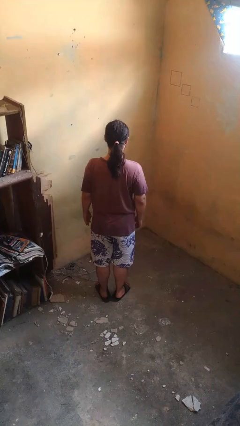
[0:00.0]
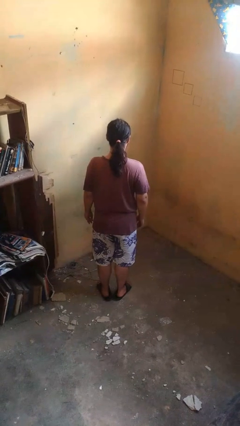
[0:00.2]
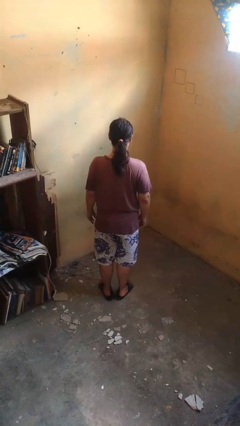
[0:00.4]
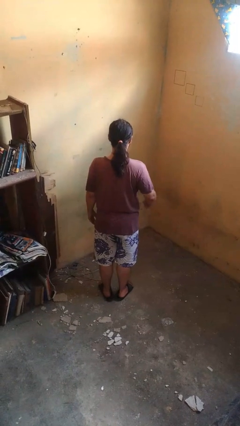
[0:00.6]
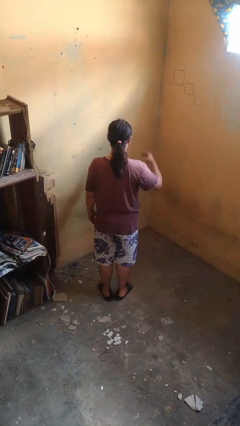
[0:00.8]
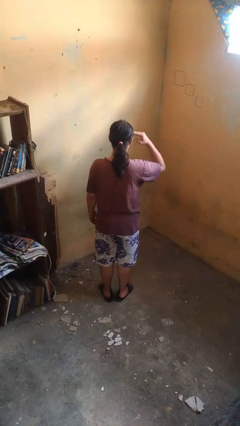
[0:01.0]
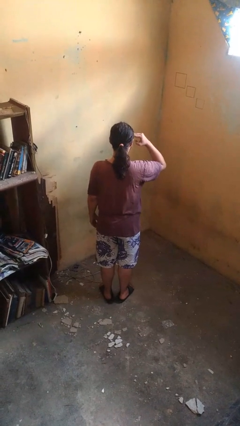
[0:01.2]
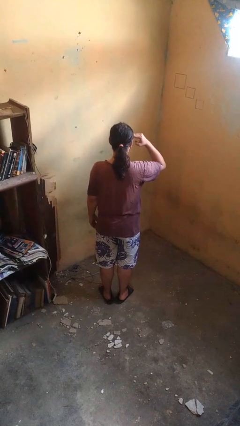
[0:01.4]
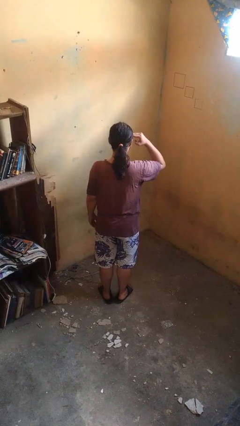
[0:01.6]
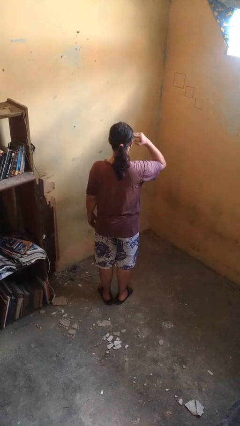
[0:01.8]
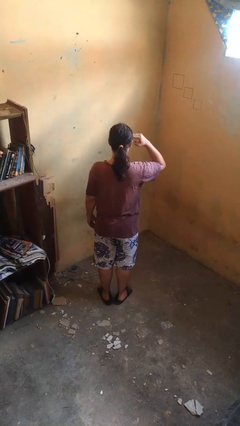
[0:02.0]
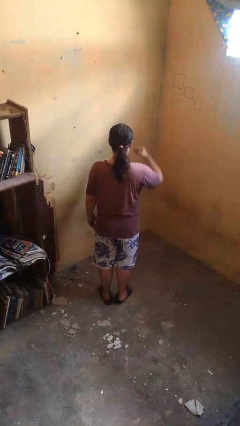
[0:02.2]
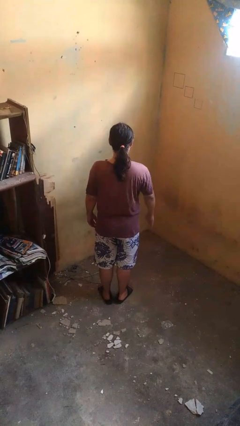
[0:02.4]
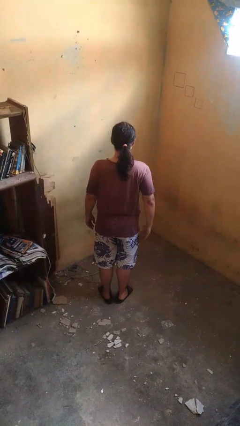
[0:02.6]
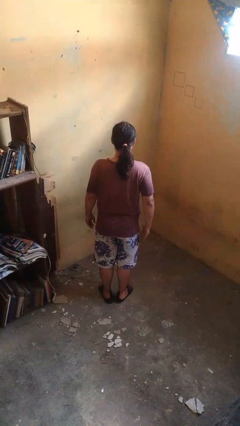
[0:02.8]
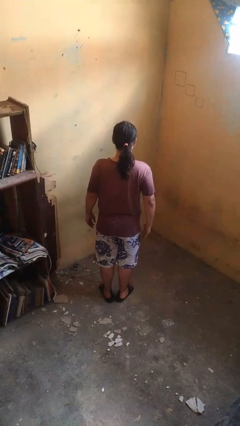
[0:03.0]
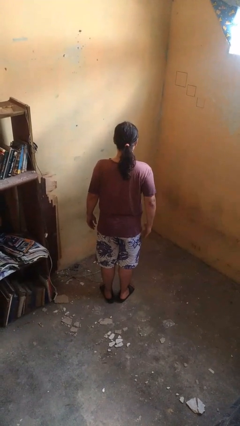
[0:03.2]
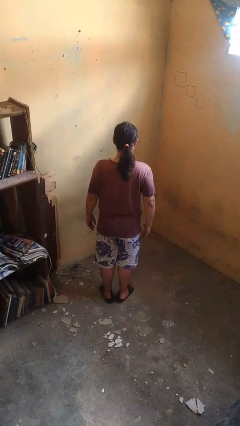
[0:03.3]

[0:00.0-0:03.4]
person salutes

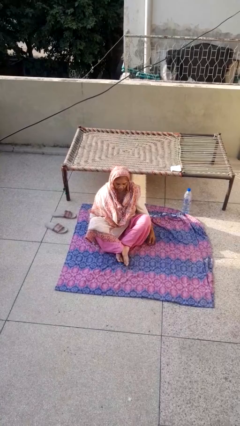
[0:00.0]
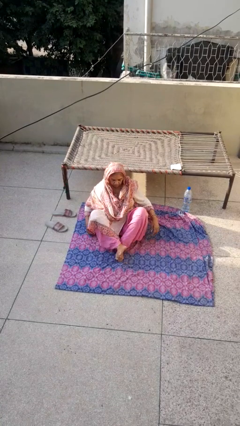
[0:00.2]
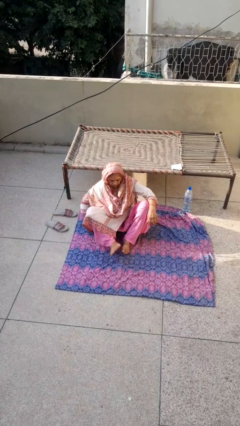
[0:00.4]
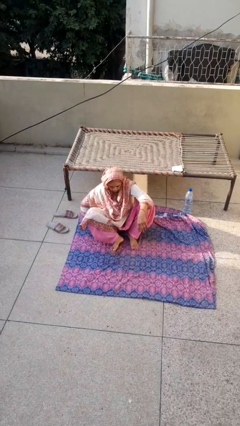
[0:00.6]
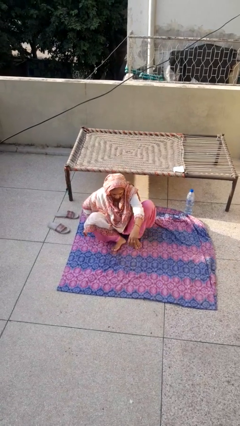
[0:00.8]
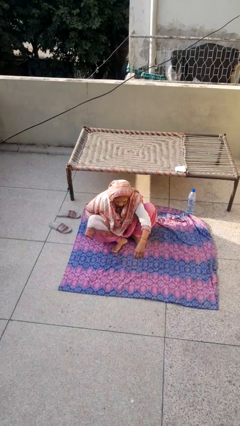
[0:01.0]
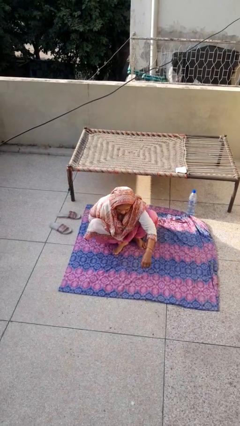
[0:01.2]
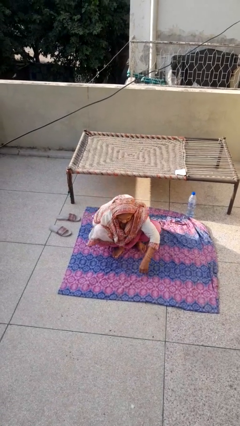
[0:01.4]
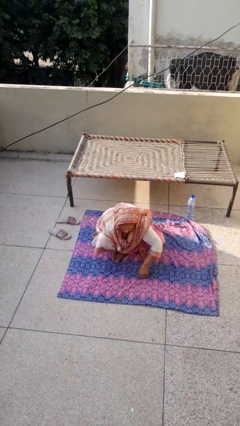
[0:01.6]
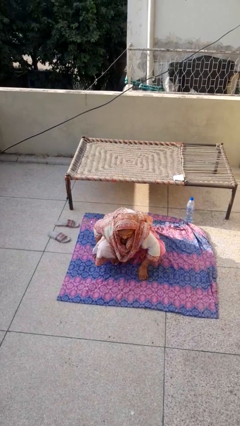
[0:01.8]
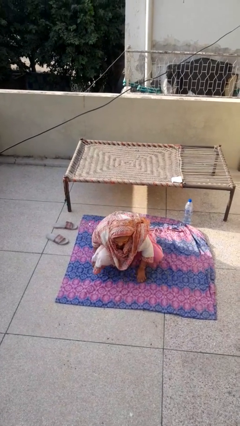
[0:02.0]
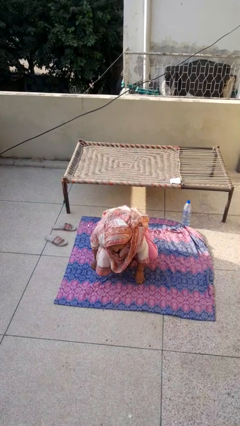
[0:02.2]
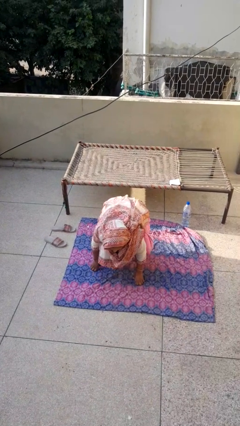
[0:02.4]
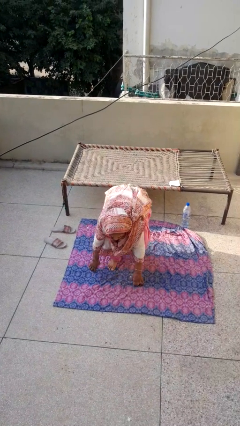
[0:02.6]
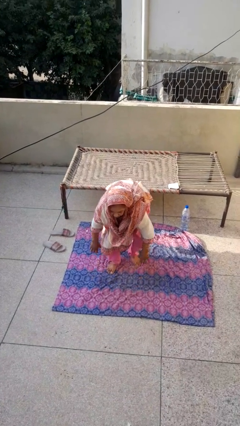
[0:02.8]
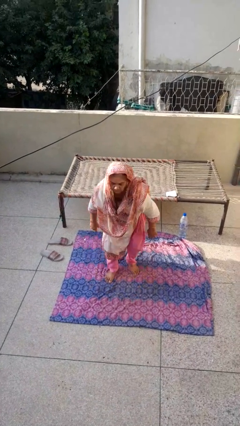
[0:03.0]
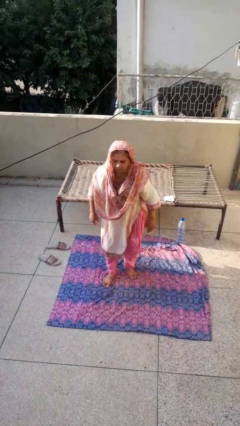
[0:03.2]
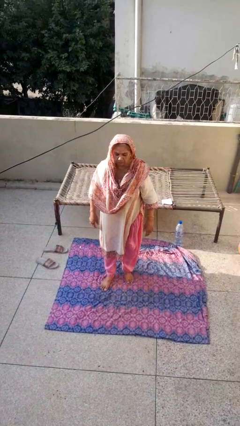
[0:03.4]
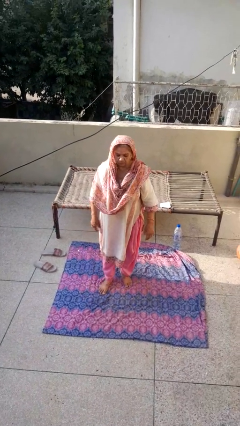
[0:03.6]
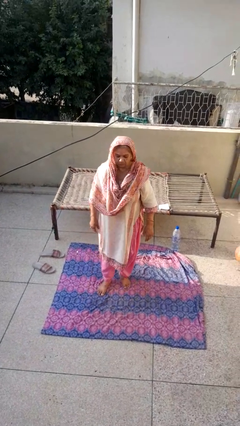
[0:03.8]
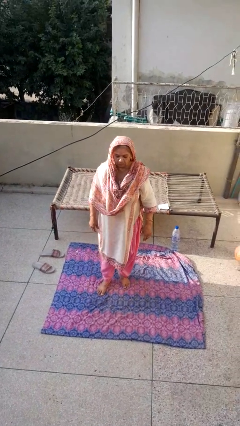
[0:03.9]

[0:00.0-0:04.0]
person stands up from floor

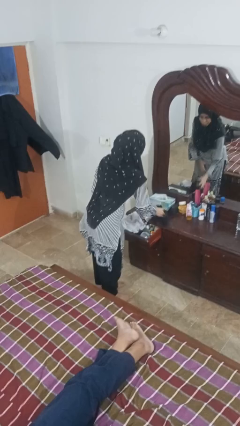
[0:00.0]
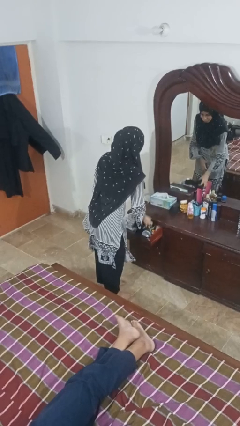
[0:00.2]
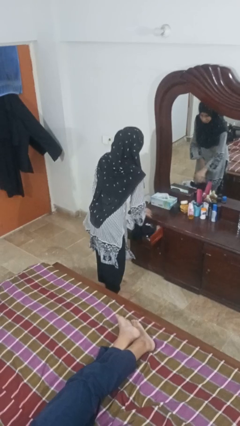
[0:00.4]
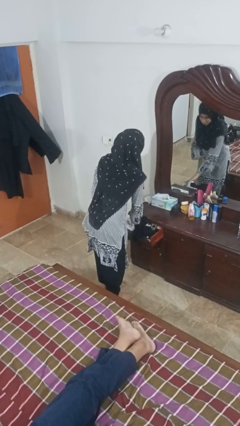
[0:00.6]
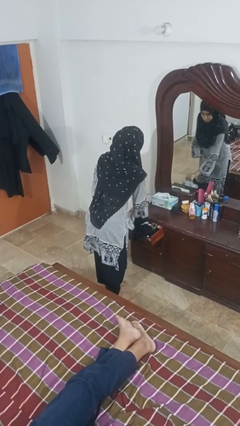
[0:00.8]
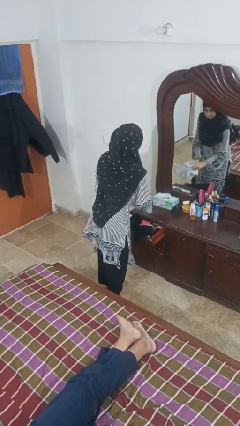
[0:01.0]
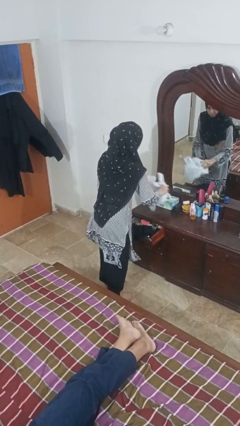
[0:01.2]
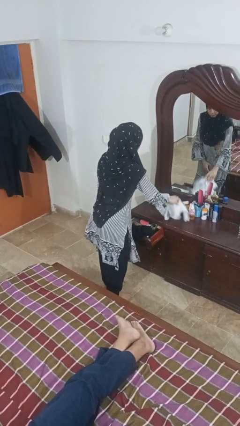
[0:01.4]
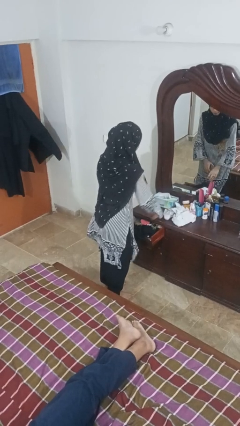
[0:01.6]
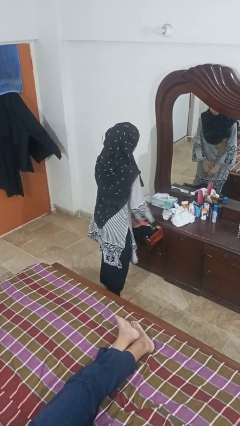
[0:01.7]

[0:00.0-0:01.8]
person takes clothes from dresser

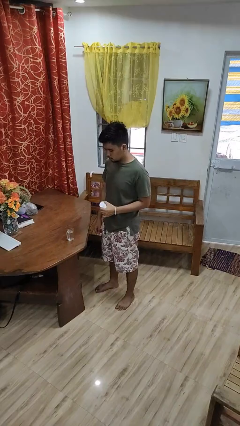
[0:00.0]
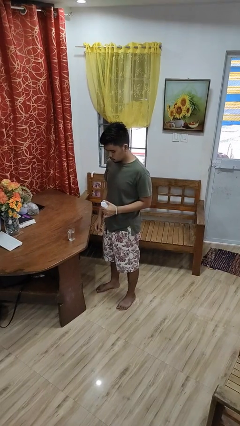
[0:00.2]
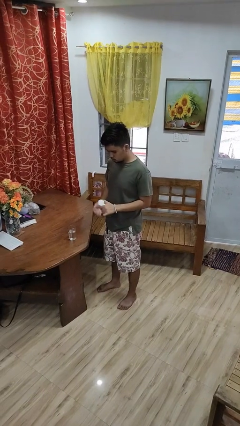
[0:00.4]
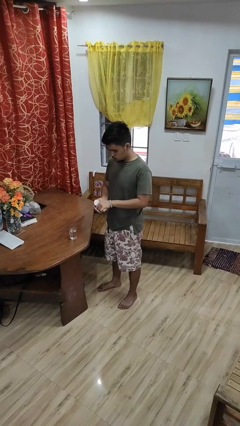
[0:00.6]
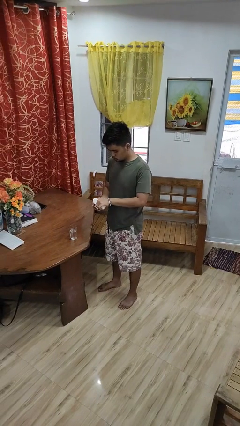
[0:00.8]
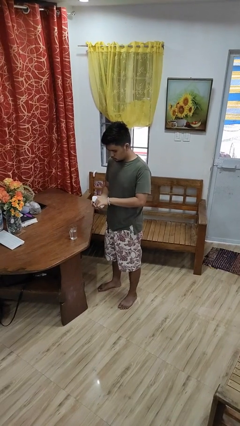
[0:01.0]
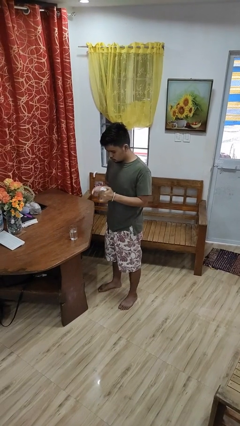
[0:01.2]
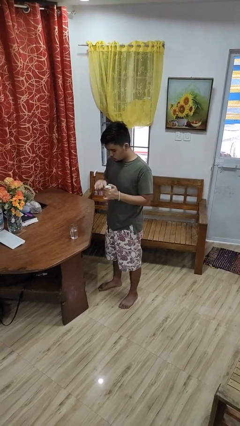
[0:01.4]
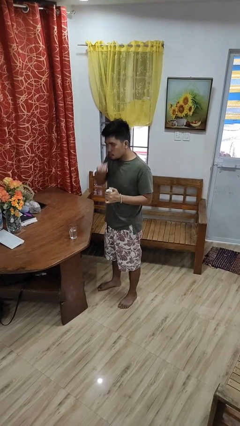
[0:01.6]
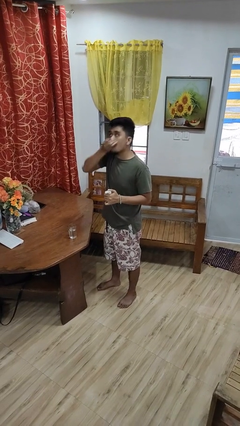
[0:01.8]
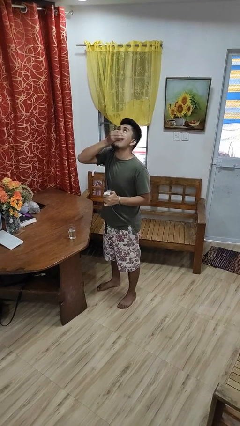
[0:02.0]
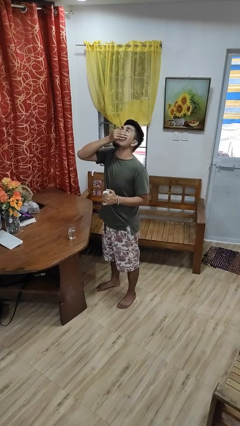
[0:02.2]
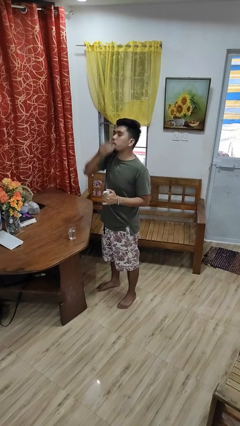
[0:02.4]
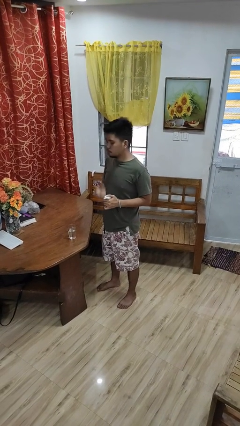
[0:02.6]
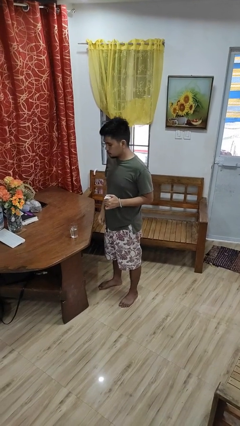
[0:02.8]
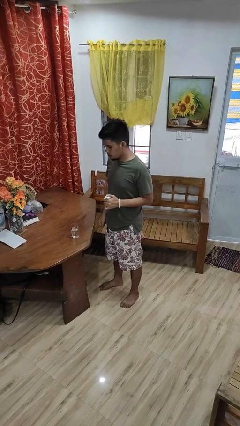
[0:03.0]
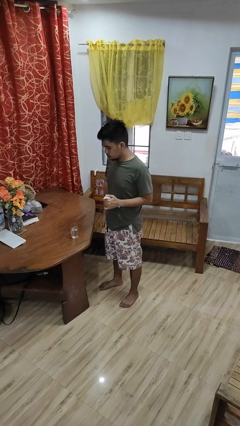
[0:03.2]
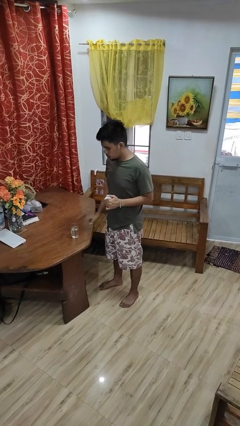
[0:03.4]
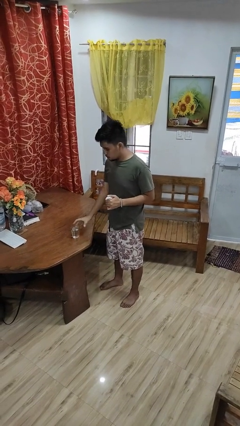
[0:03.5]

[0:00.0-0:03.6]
person takes medicine pills

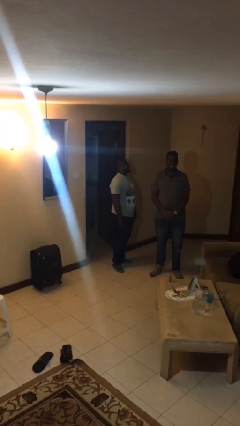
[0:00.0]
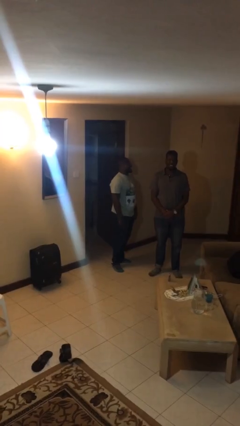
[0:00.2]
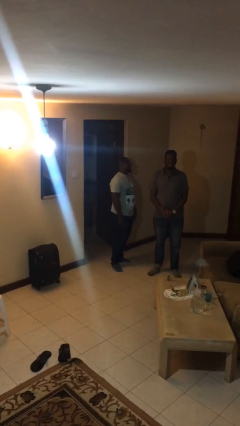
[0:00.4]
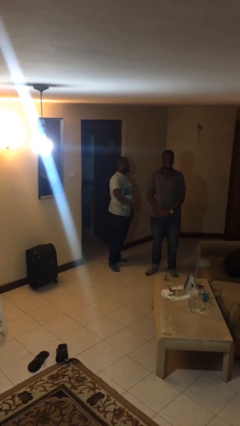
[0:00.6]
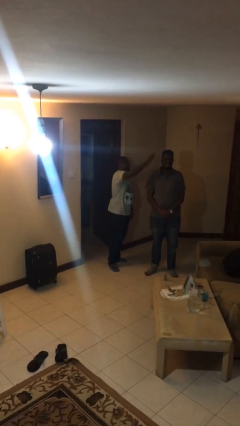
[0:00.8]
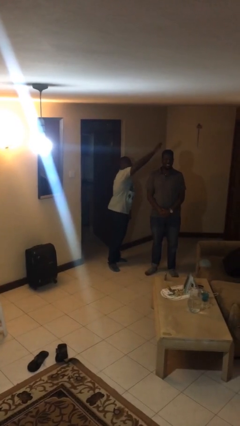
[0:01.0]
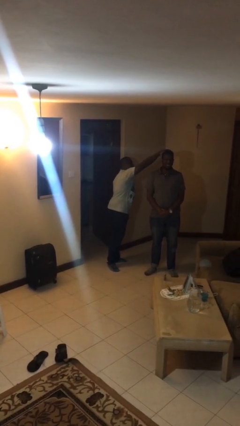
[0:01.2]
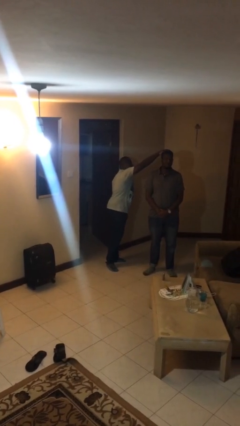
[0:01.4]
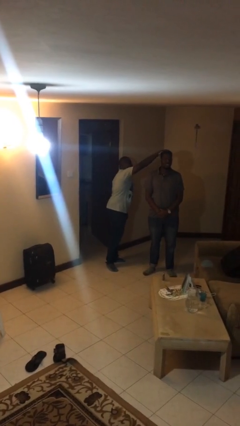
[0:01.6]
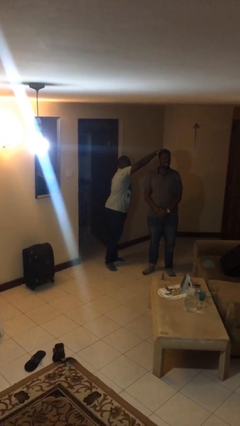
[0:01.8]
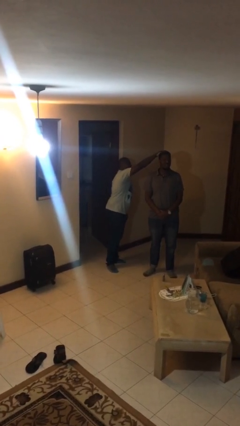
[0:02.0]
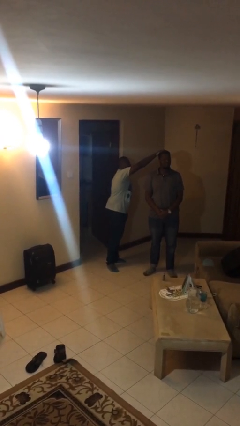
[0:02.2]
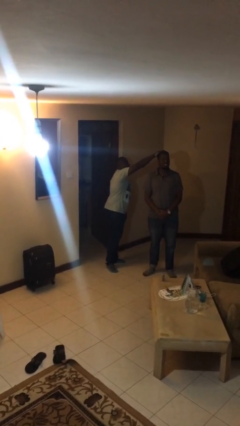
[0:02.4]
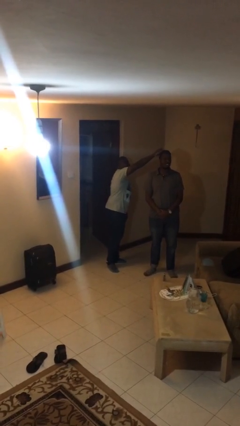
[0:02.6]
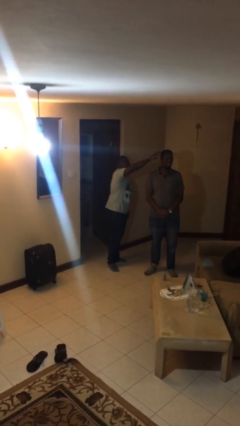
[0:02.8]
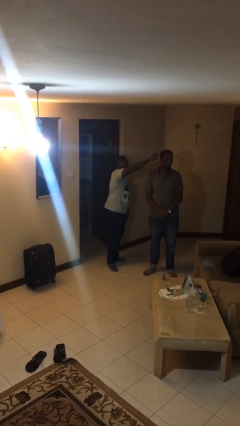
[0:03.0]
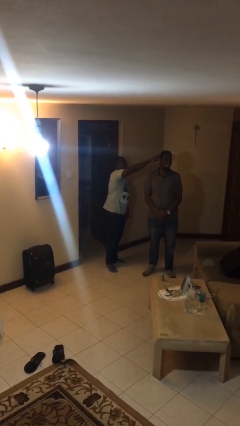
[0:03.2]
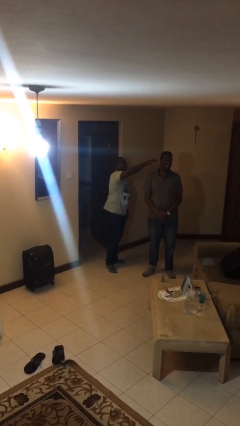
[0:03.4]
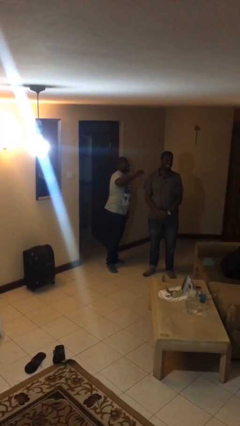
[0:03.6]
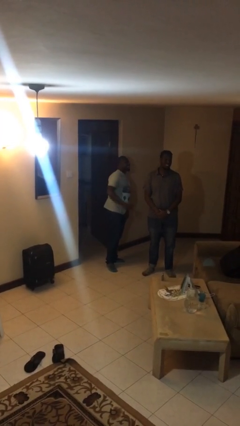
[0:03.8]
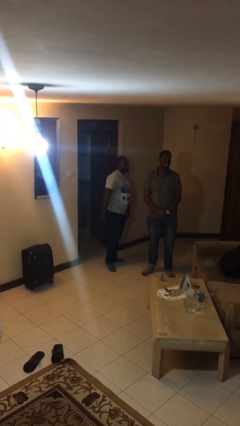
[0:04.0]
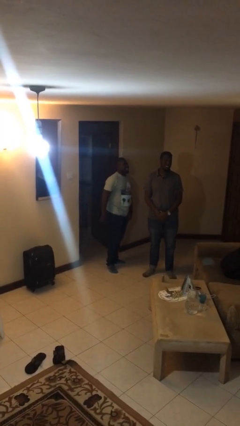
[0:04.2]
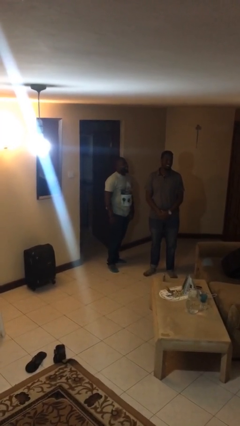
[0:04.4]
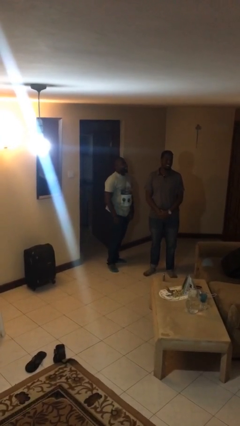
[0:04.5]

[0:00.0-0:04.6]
person grabs person by hair
